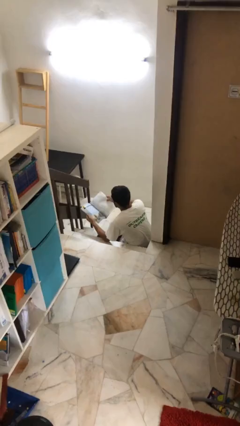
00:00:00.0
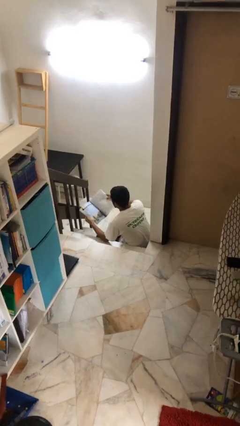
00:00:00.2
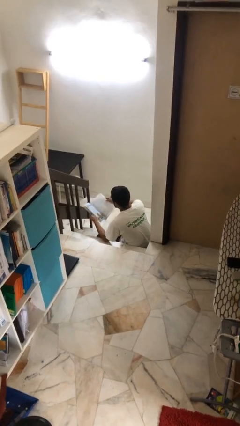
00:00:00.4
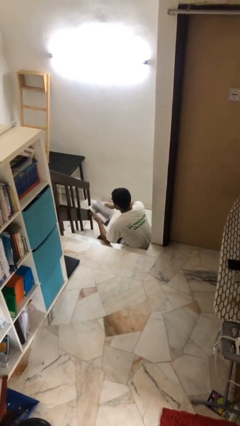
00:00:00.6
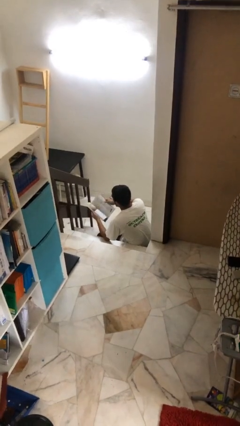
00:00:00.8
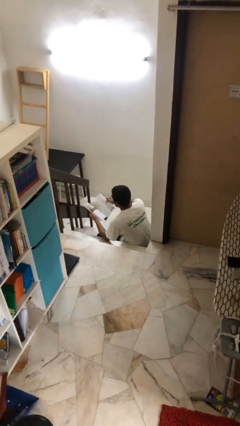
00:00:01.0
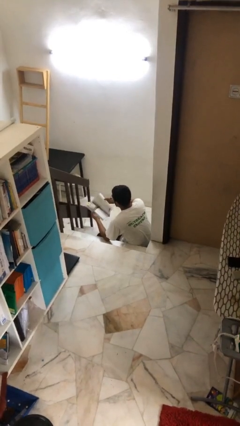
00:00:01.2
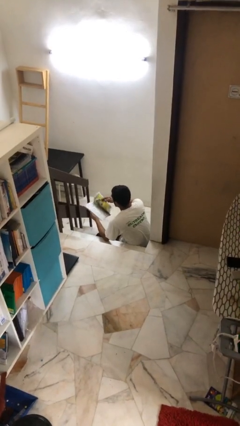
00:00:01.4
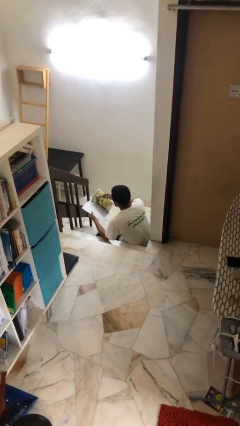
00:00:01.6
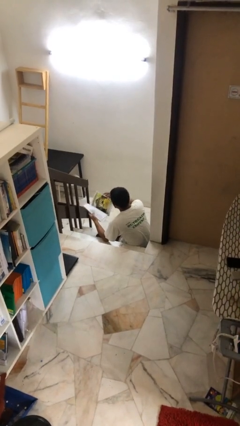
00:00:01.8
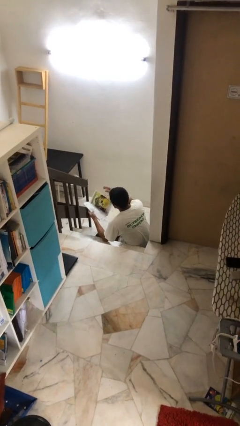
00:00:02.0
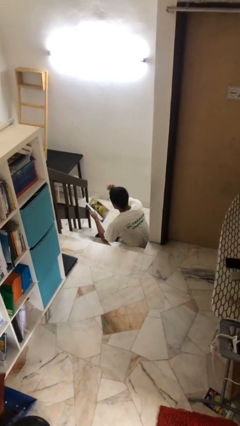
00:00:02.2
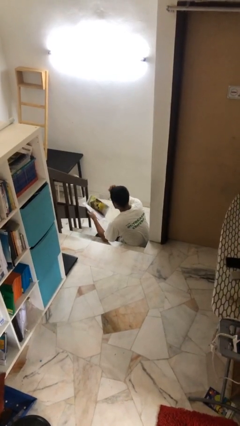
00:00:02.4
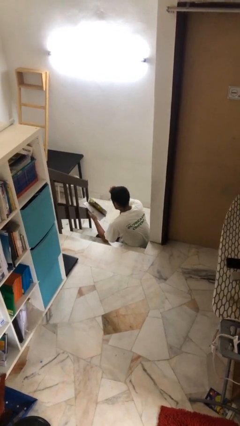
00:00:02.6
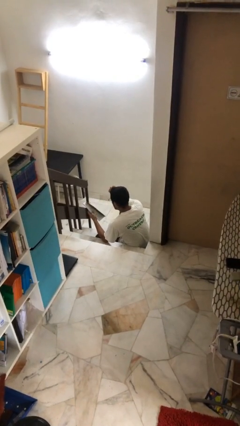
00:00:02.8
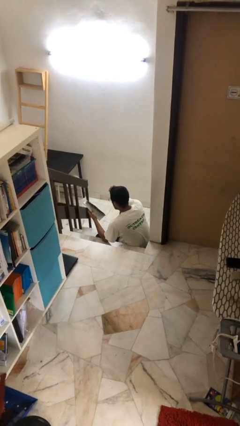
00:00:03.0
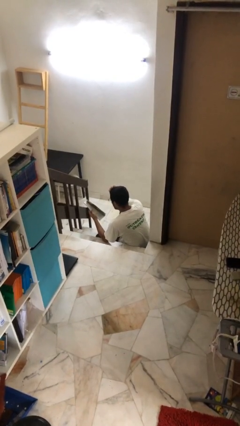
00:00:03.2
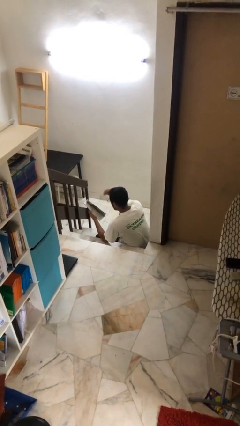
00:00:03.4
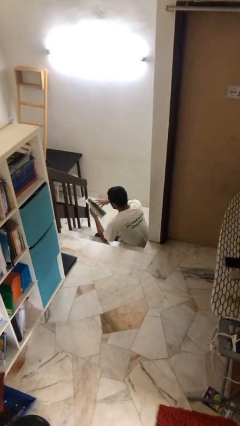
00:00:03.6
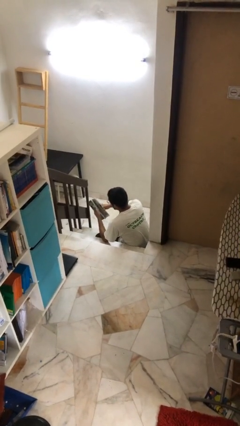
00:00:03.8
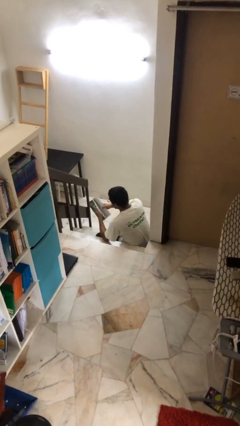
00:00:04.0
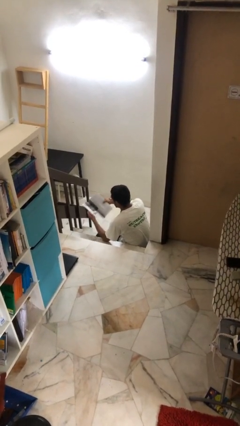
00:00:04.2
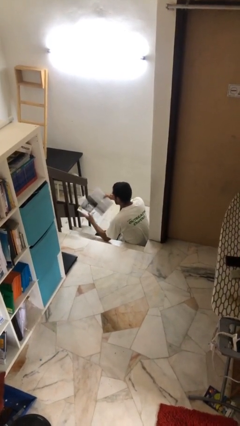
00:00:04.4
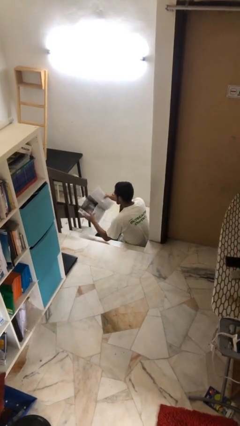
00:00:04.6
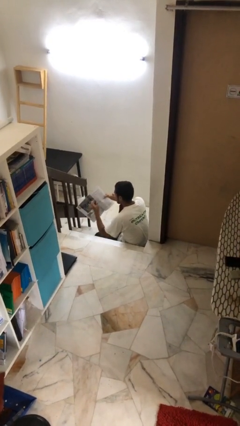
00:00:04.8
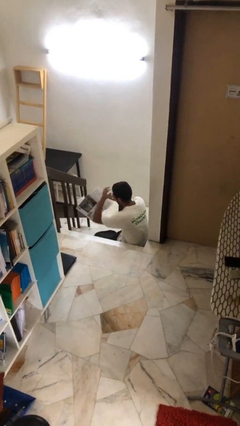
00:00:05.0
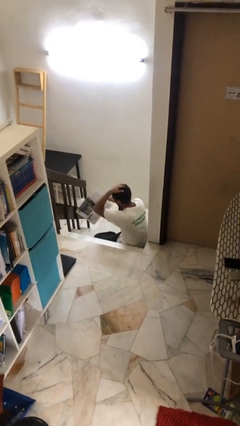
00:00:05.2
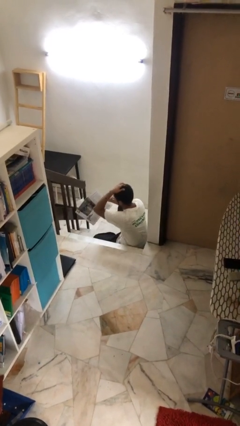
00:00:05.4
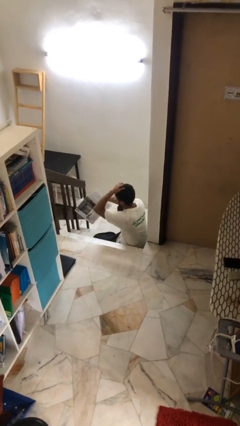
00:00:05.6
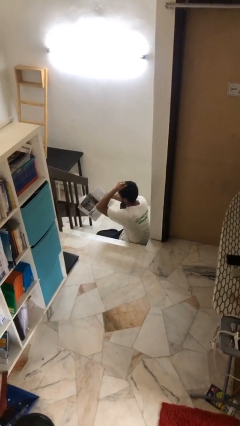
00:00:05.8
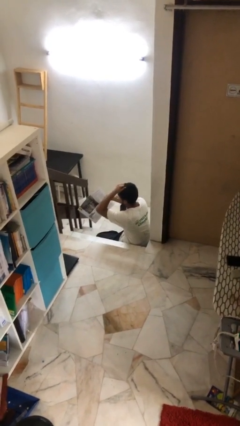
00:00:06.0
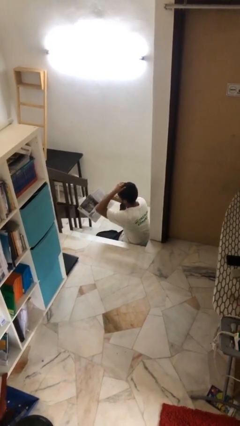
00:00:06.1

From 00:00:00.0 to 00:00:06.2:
person reads document

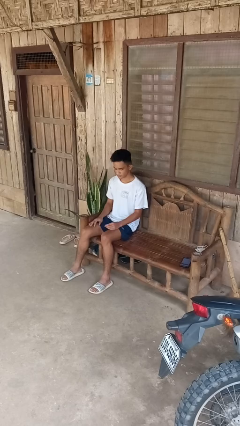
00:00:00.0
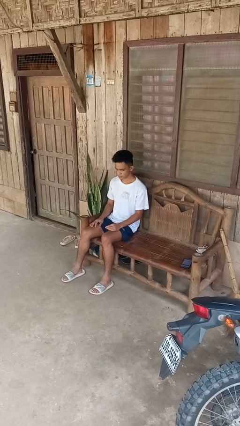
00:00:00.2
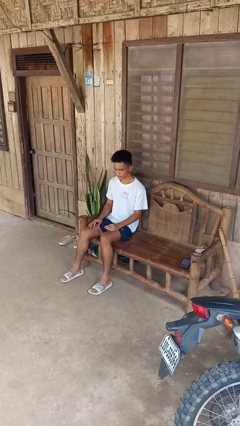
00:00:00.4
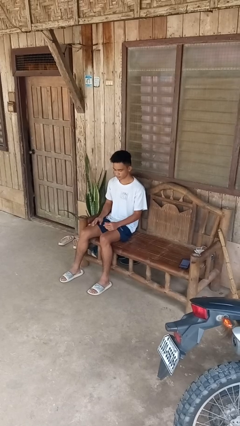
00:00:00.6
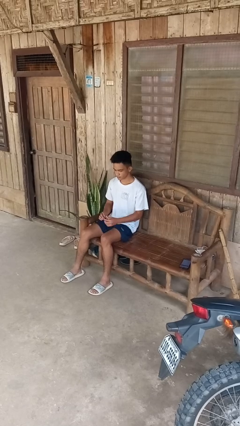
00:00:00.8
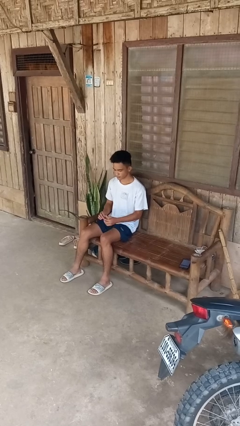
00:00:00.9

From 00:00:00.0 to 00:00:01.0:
person takes off ring

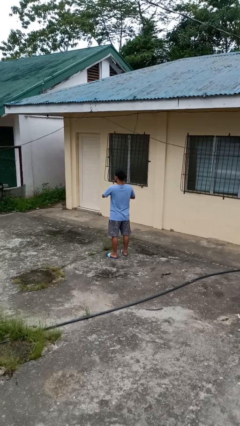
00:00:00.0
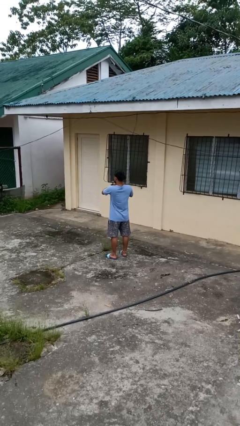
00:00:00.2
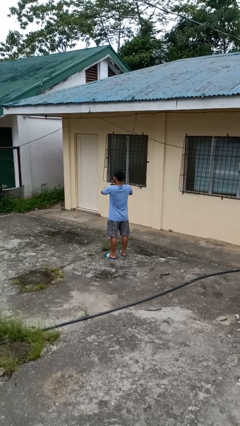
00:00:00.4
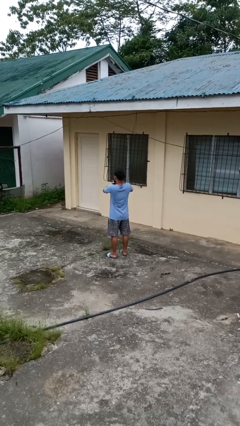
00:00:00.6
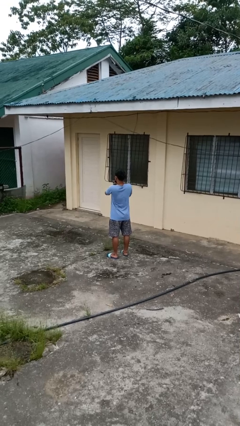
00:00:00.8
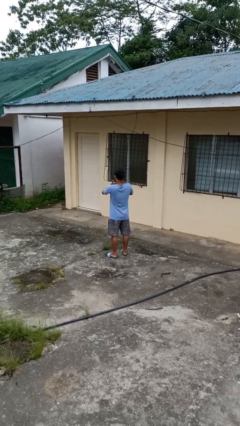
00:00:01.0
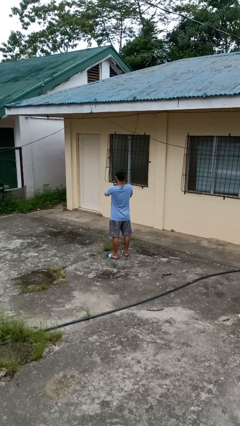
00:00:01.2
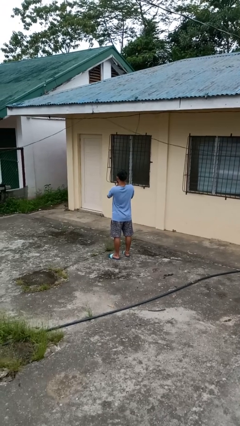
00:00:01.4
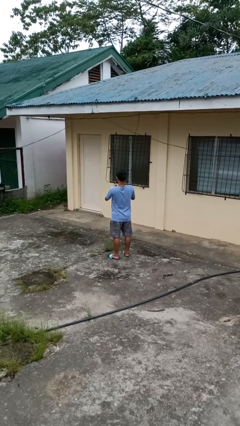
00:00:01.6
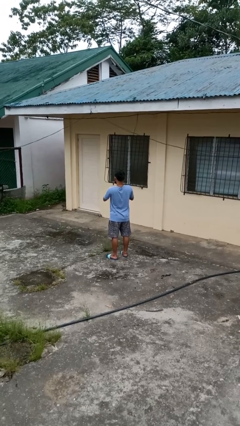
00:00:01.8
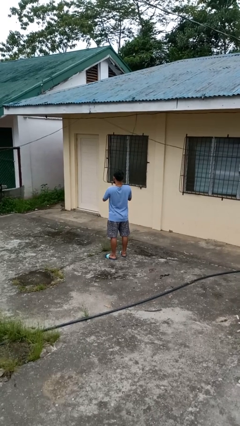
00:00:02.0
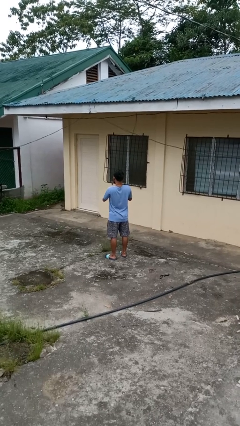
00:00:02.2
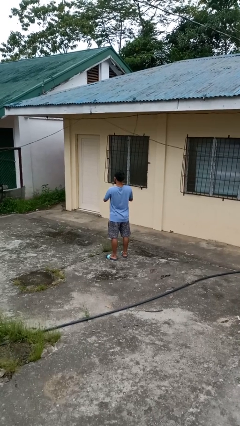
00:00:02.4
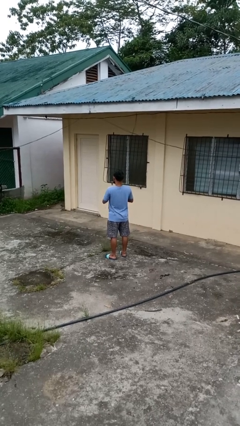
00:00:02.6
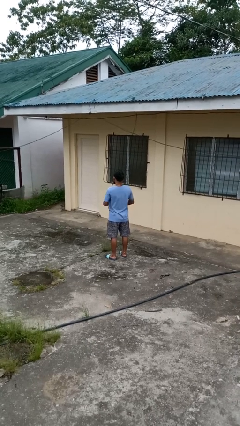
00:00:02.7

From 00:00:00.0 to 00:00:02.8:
person cracks knuckles

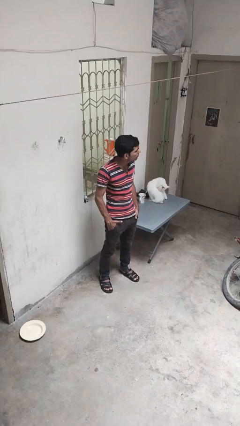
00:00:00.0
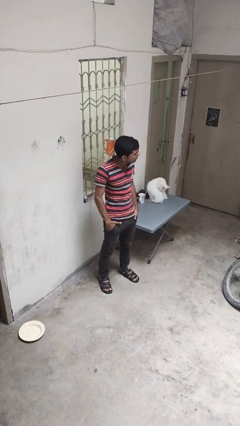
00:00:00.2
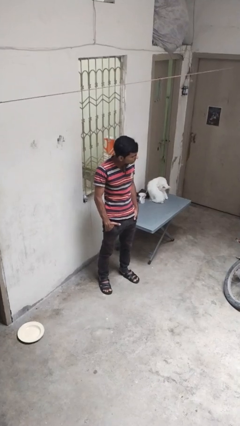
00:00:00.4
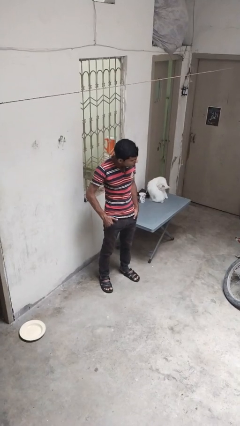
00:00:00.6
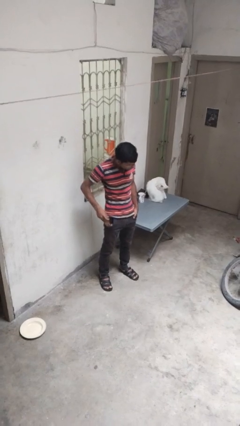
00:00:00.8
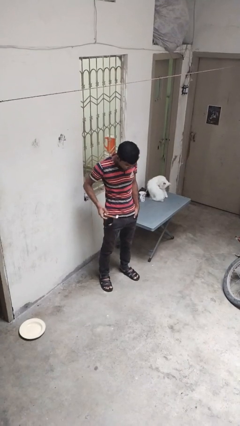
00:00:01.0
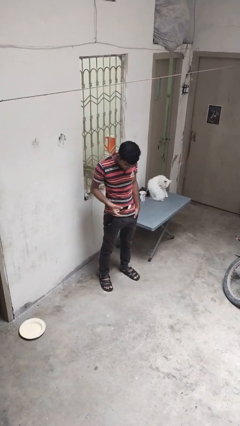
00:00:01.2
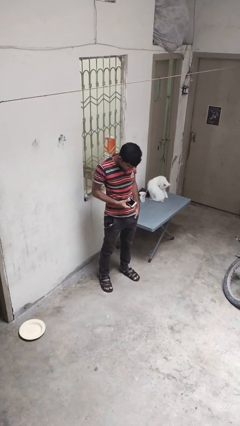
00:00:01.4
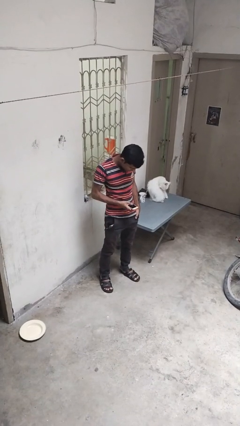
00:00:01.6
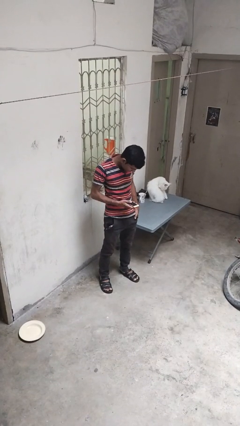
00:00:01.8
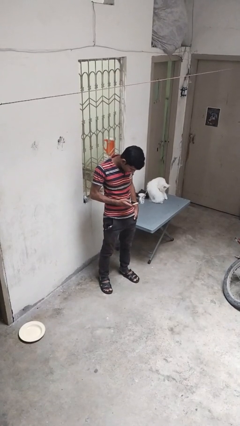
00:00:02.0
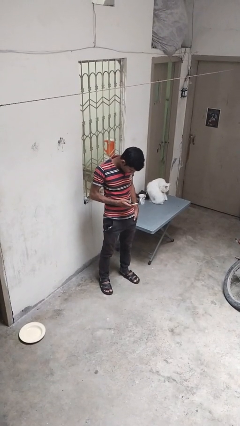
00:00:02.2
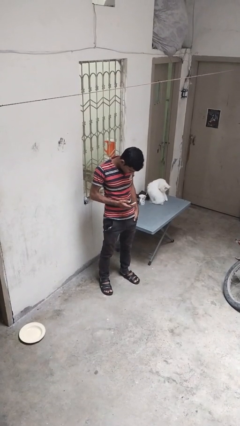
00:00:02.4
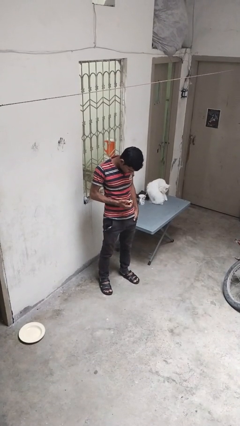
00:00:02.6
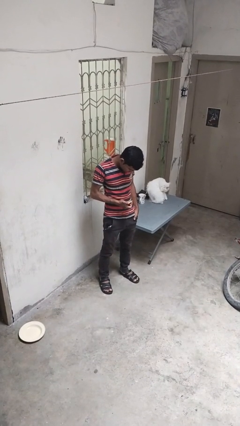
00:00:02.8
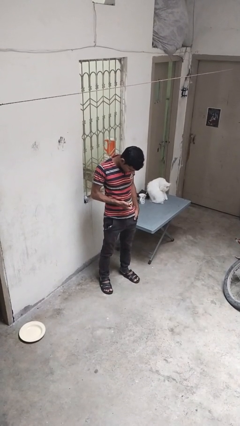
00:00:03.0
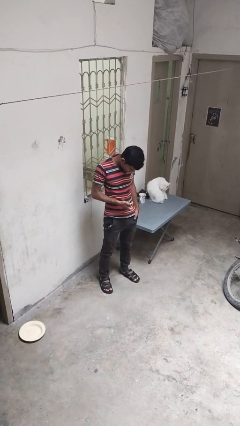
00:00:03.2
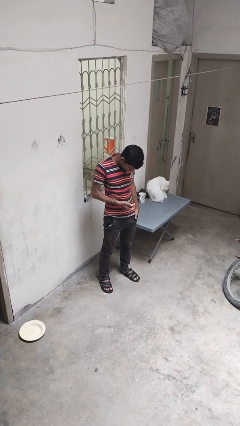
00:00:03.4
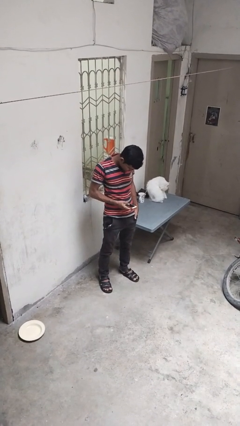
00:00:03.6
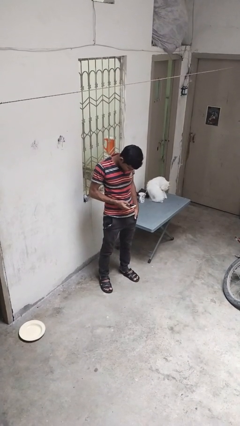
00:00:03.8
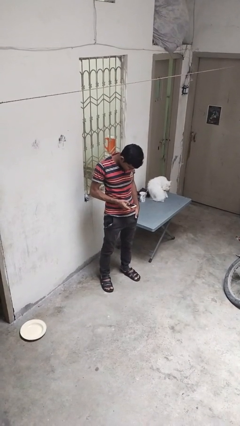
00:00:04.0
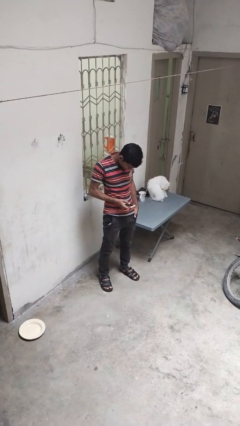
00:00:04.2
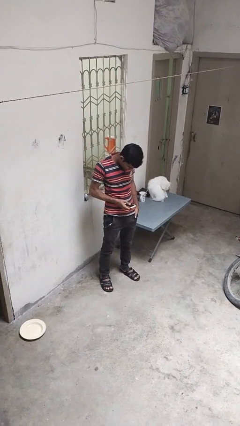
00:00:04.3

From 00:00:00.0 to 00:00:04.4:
person takes phone from pocket

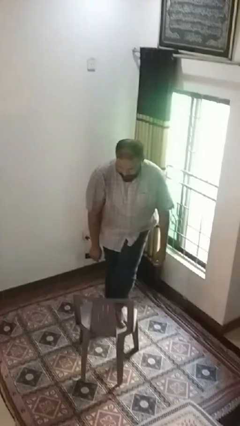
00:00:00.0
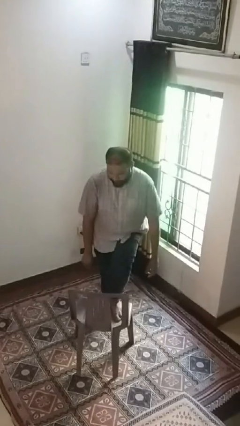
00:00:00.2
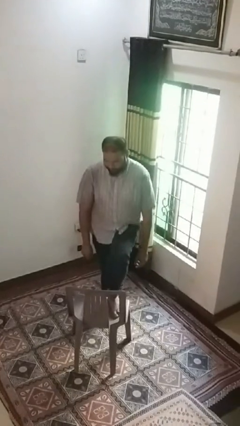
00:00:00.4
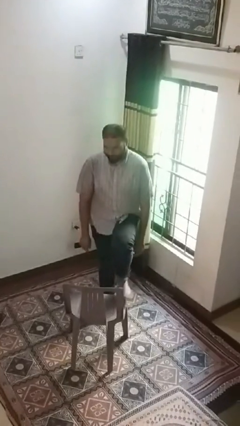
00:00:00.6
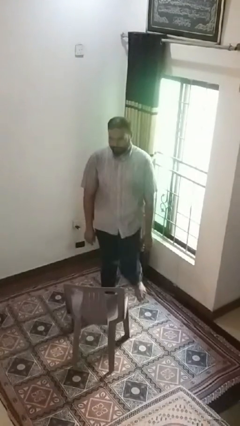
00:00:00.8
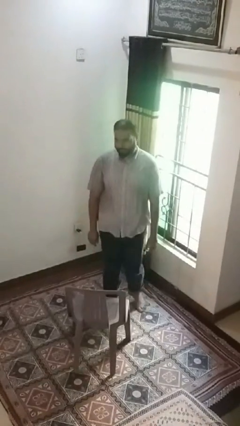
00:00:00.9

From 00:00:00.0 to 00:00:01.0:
person climbs off chair

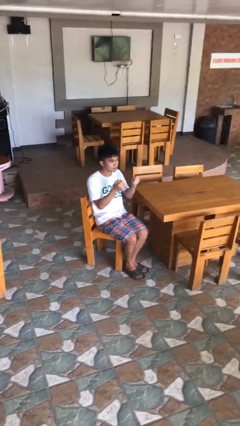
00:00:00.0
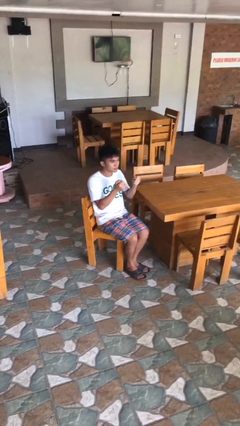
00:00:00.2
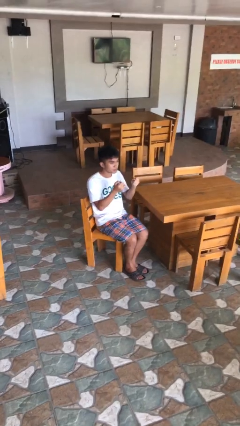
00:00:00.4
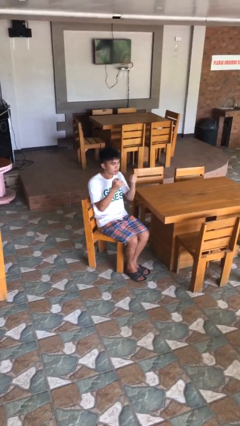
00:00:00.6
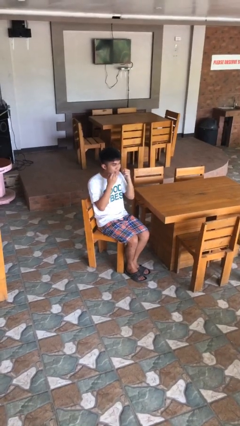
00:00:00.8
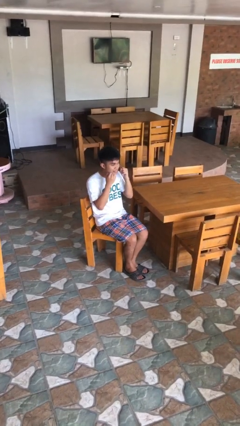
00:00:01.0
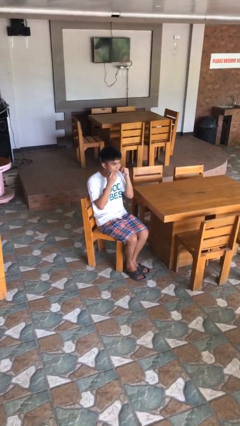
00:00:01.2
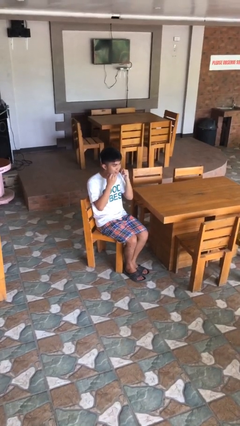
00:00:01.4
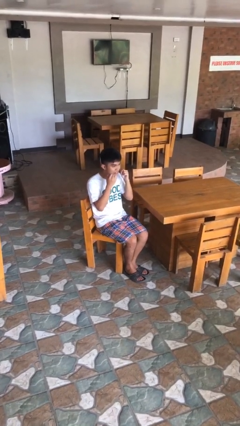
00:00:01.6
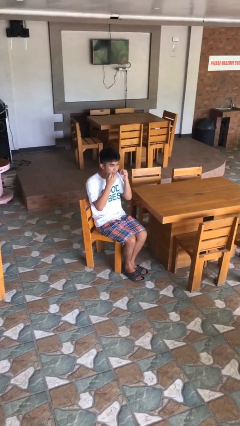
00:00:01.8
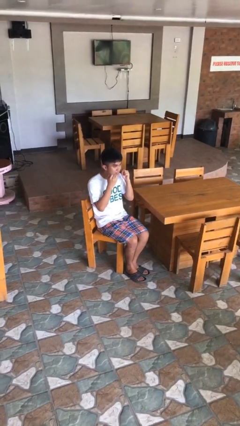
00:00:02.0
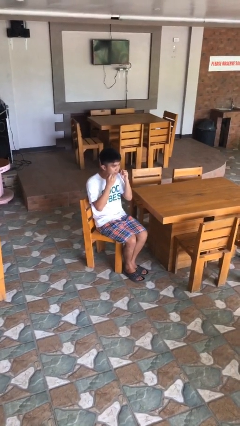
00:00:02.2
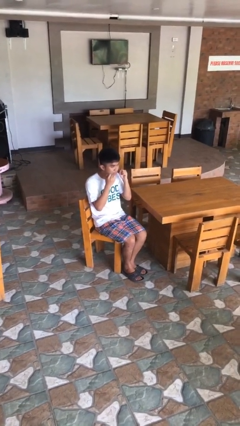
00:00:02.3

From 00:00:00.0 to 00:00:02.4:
person flosses
